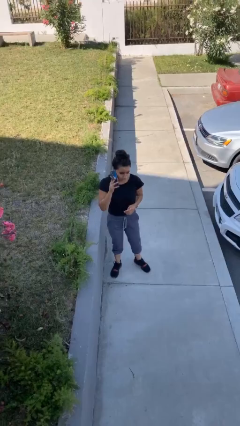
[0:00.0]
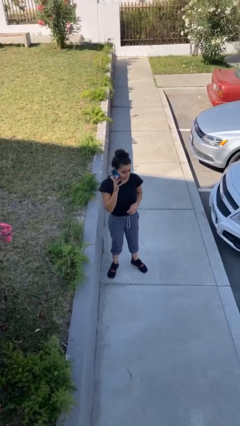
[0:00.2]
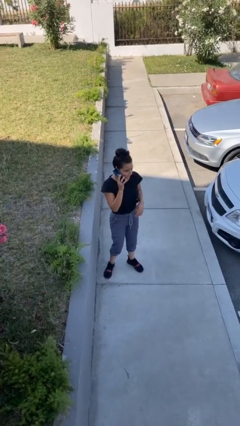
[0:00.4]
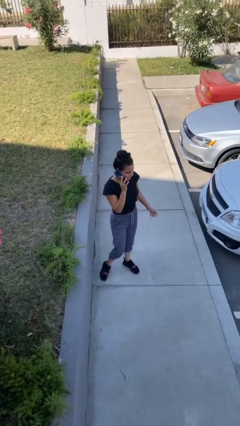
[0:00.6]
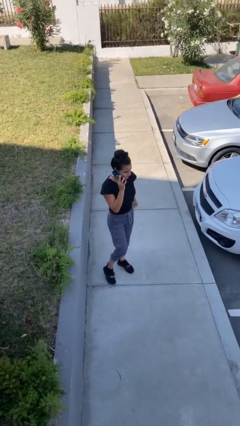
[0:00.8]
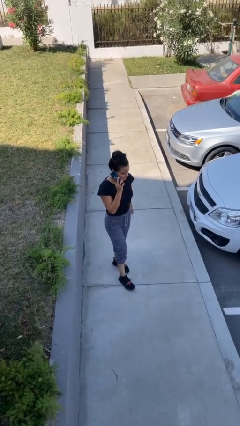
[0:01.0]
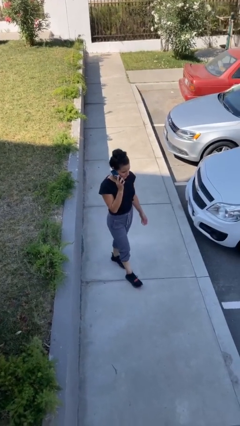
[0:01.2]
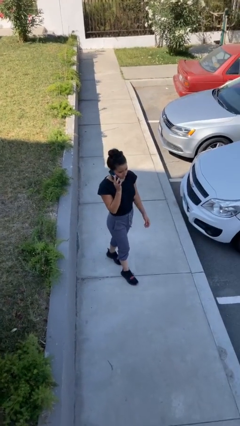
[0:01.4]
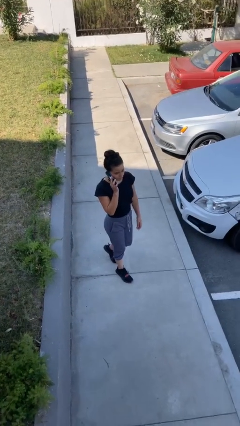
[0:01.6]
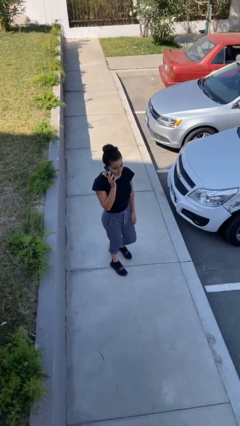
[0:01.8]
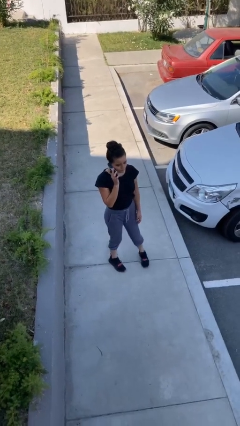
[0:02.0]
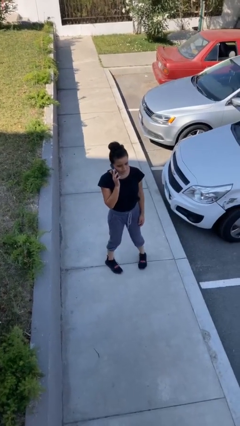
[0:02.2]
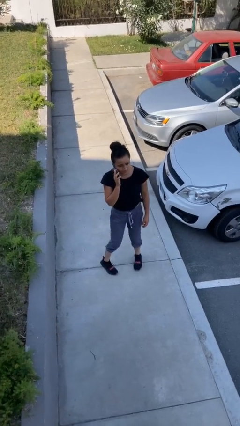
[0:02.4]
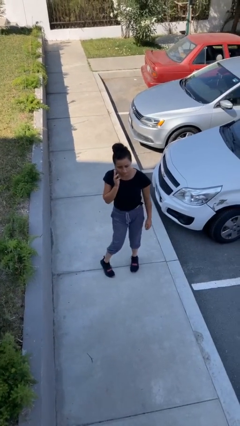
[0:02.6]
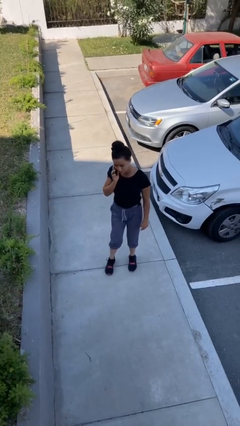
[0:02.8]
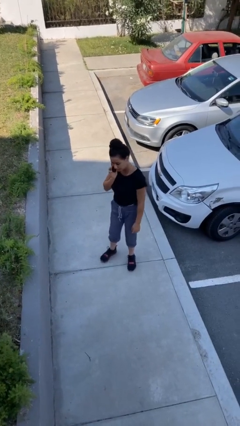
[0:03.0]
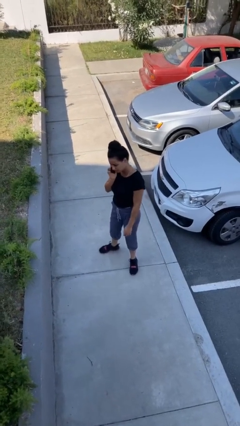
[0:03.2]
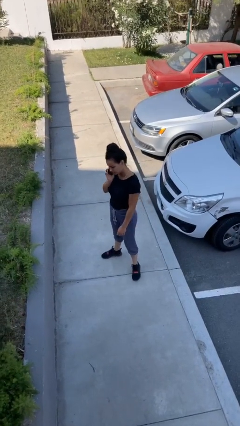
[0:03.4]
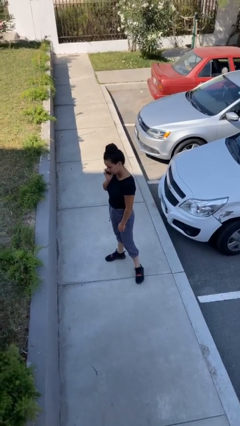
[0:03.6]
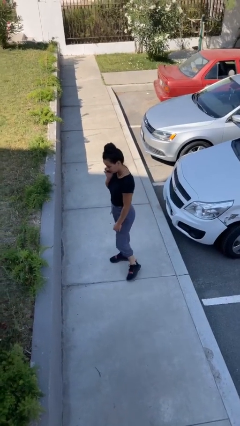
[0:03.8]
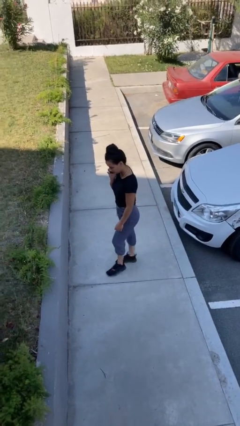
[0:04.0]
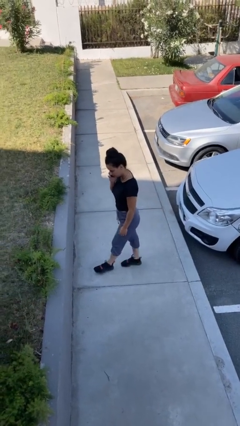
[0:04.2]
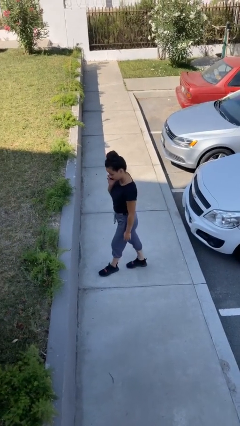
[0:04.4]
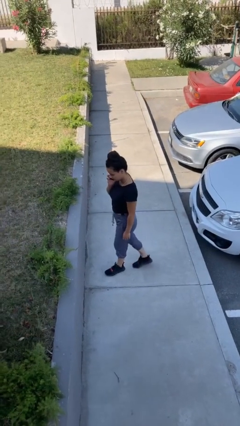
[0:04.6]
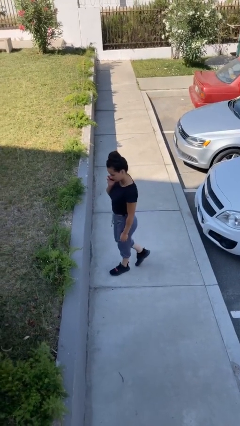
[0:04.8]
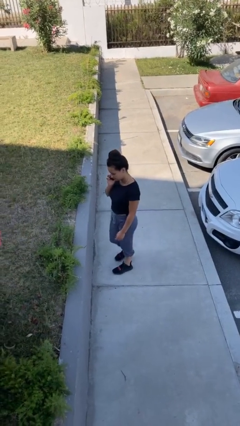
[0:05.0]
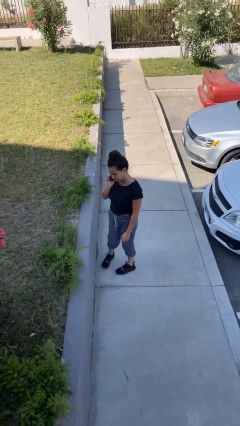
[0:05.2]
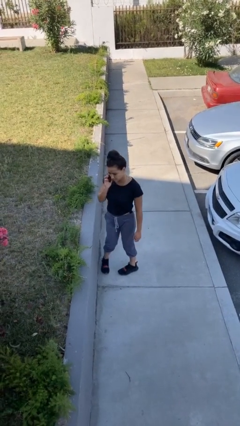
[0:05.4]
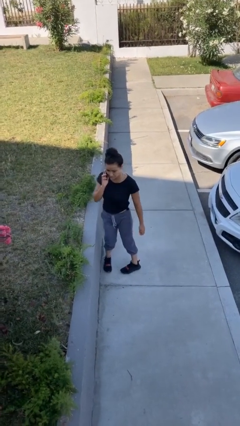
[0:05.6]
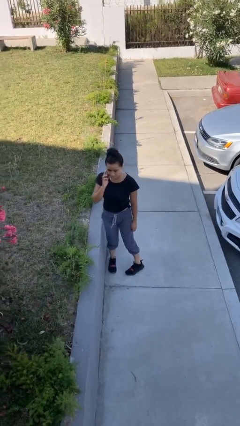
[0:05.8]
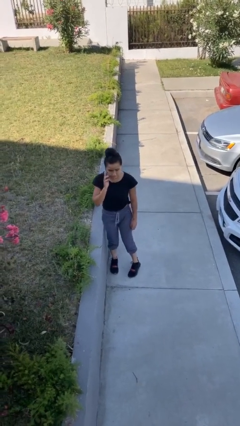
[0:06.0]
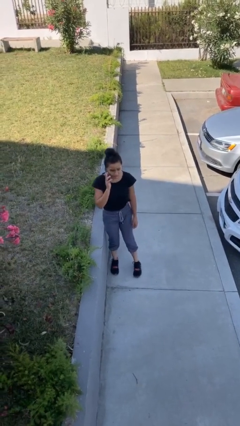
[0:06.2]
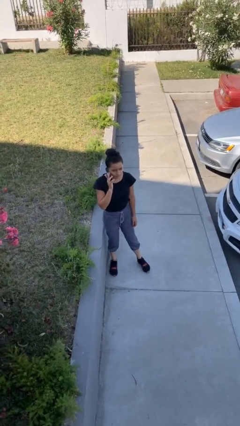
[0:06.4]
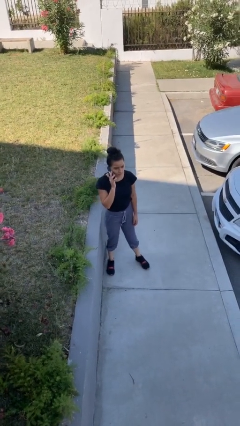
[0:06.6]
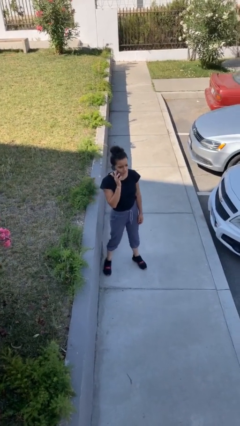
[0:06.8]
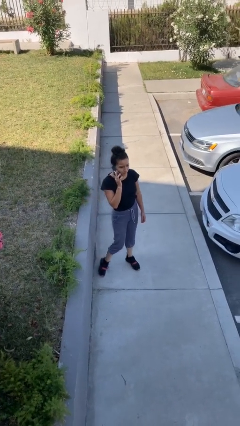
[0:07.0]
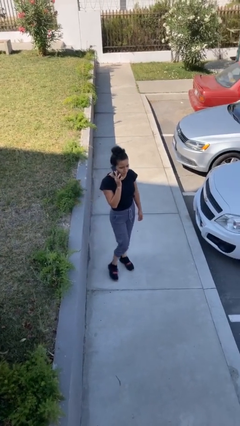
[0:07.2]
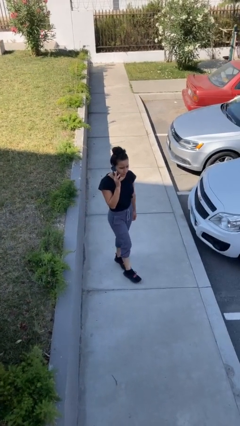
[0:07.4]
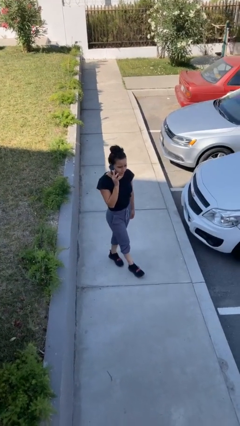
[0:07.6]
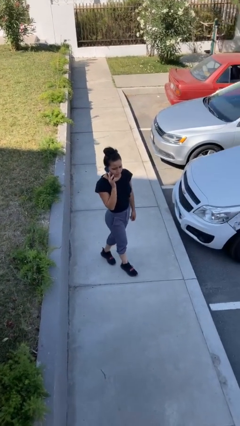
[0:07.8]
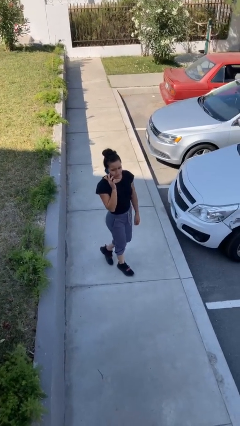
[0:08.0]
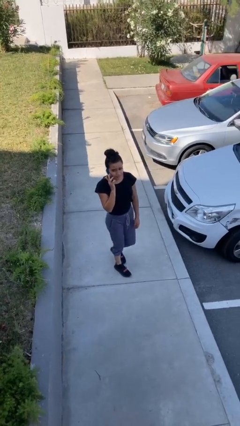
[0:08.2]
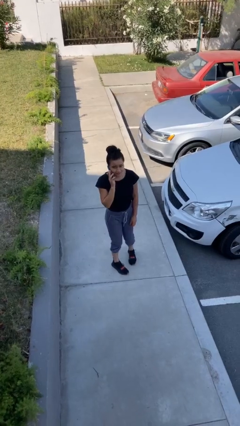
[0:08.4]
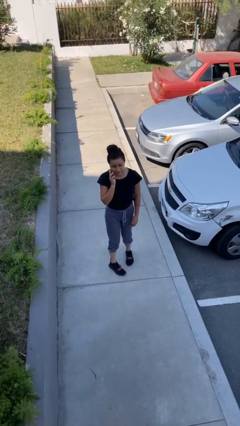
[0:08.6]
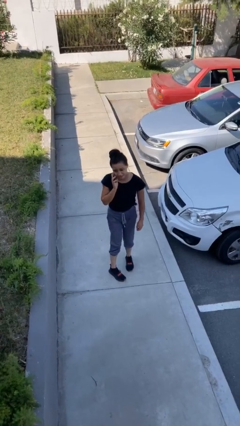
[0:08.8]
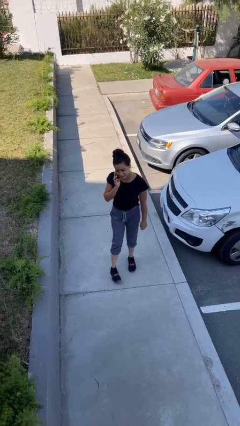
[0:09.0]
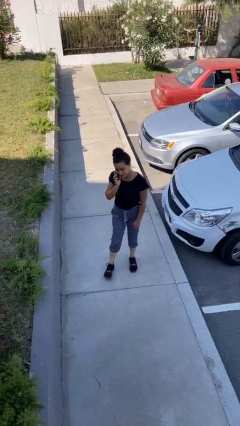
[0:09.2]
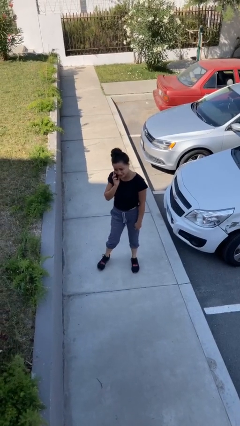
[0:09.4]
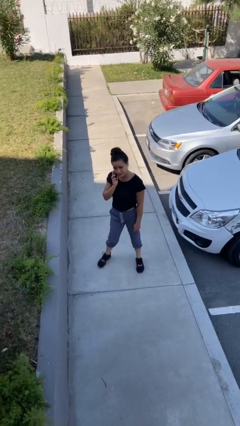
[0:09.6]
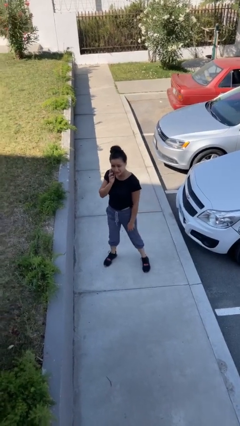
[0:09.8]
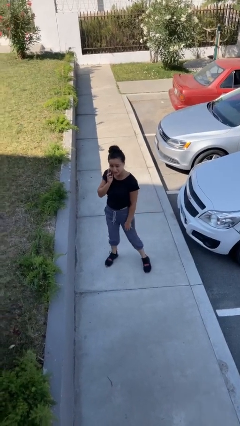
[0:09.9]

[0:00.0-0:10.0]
person talks on phone

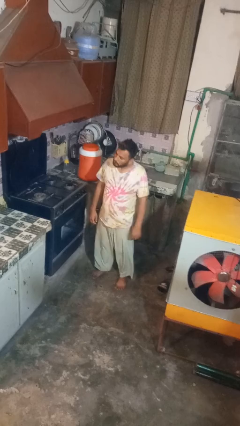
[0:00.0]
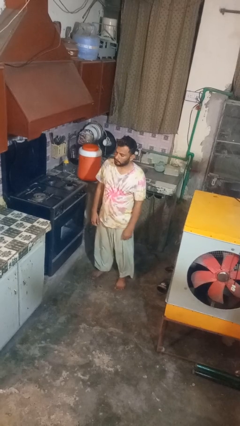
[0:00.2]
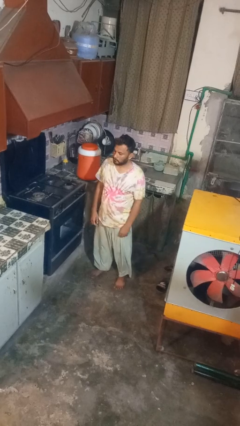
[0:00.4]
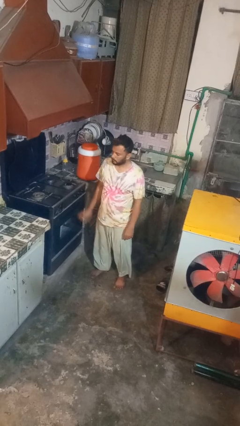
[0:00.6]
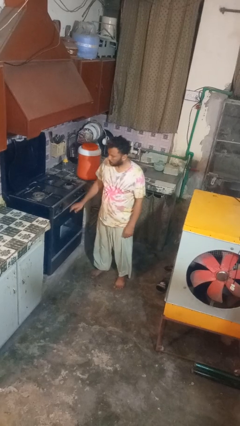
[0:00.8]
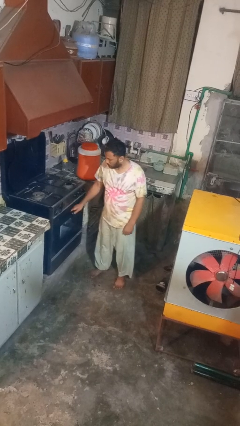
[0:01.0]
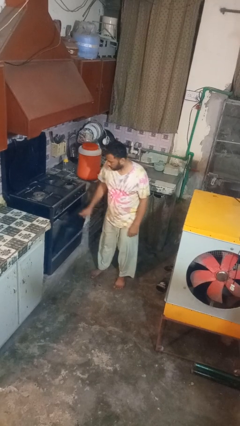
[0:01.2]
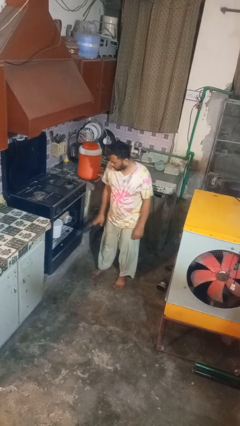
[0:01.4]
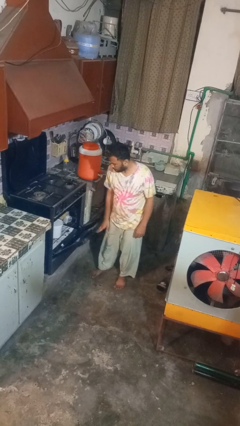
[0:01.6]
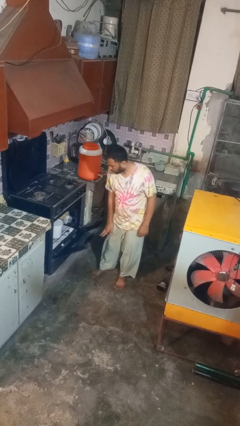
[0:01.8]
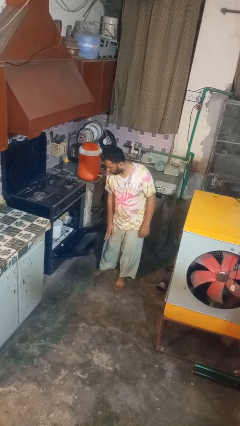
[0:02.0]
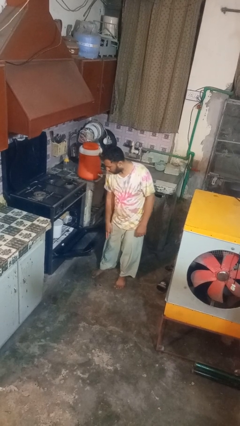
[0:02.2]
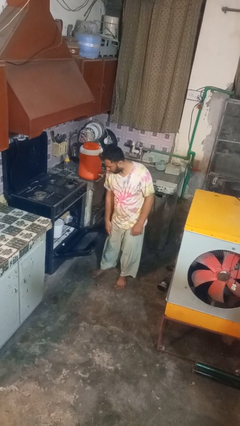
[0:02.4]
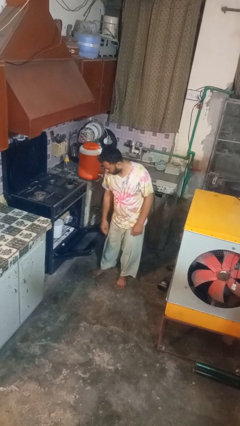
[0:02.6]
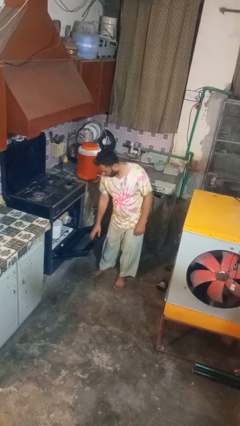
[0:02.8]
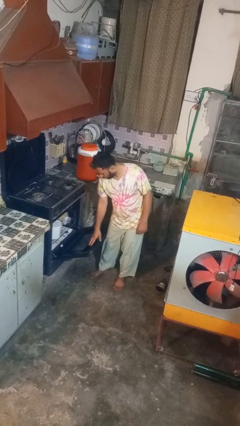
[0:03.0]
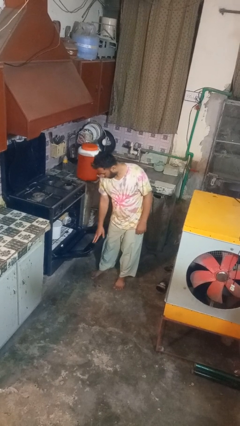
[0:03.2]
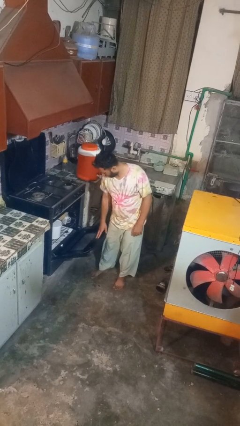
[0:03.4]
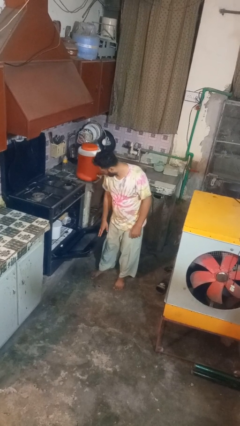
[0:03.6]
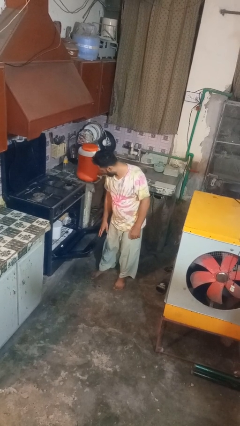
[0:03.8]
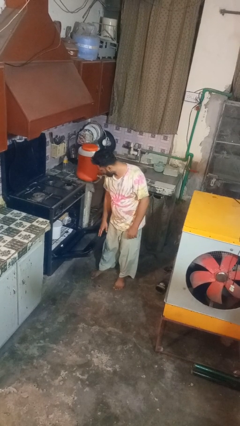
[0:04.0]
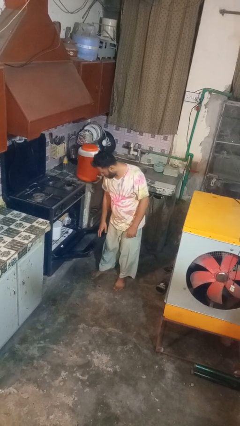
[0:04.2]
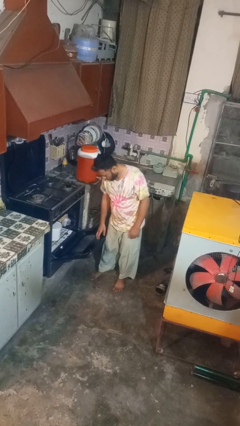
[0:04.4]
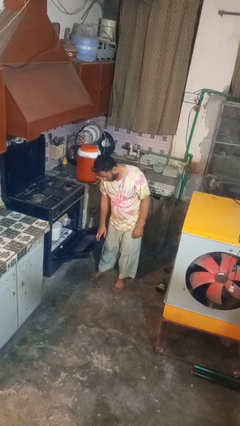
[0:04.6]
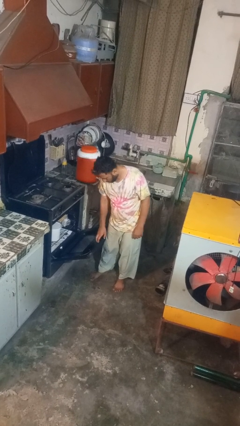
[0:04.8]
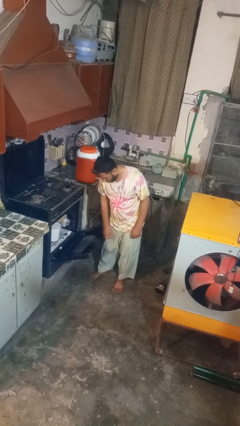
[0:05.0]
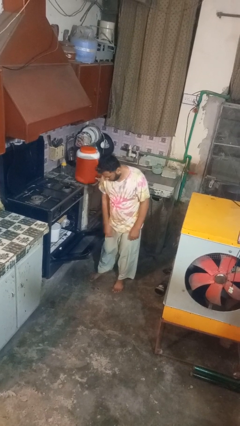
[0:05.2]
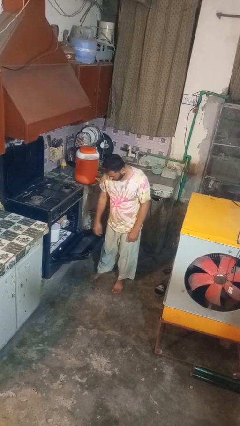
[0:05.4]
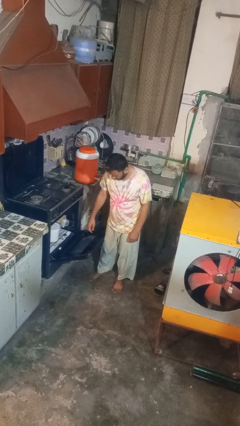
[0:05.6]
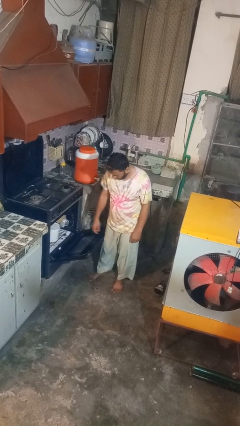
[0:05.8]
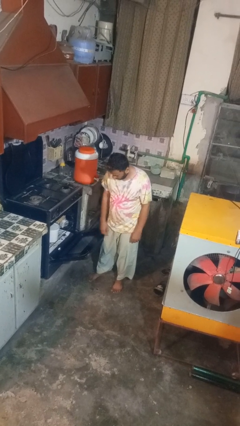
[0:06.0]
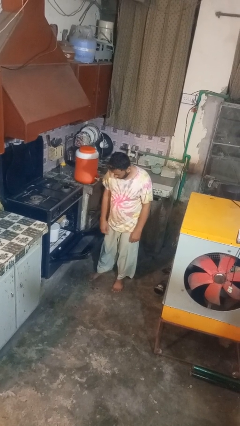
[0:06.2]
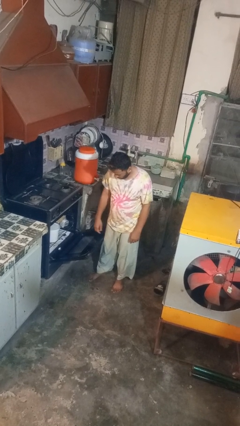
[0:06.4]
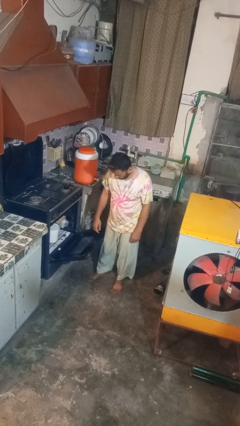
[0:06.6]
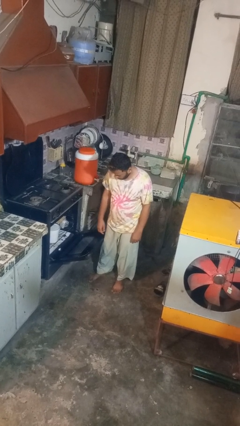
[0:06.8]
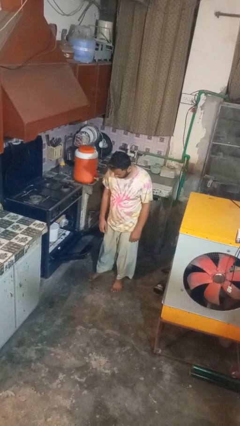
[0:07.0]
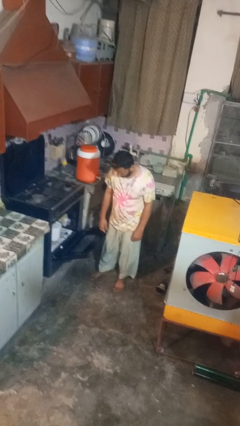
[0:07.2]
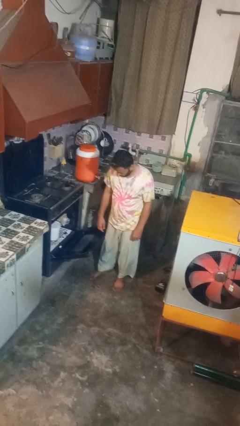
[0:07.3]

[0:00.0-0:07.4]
person opens oven door

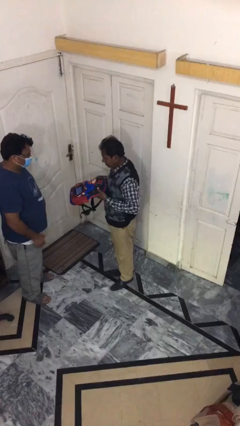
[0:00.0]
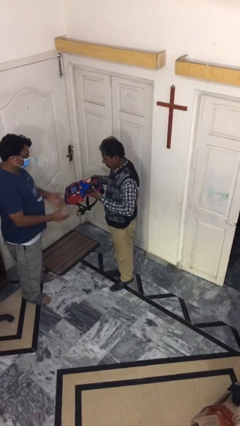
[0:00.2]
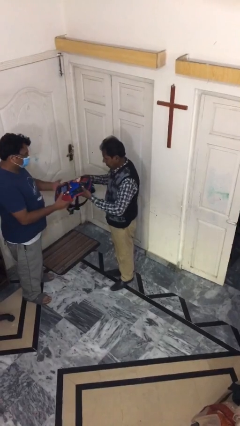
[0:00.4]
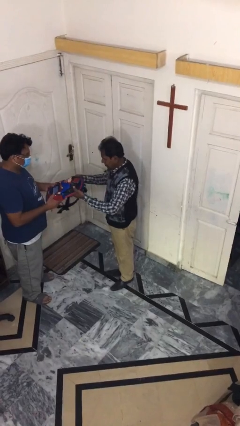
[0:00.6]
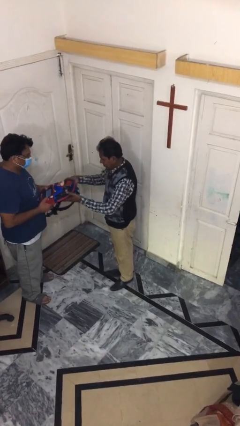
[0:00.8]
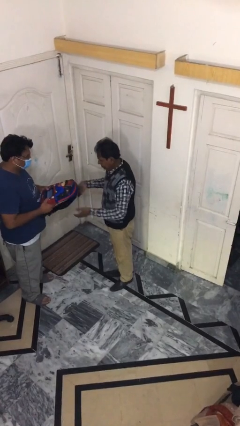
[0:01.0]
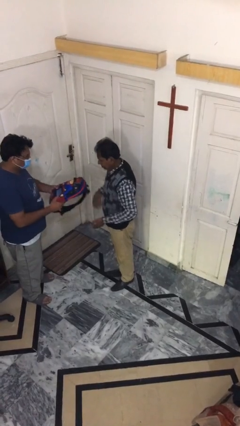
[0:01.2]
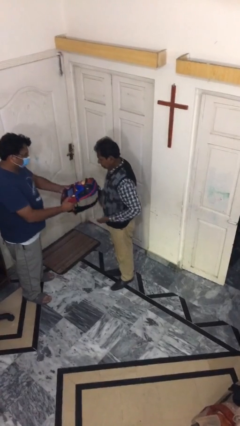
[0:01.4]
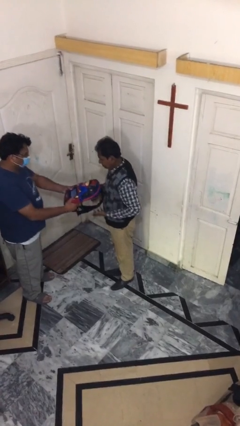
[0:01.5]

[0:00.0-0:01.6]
person transfers object to person
